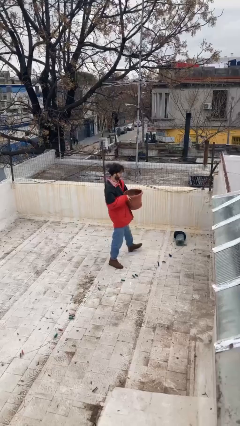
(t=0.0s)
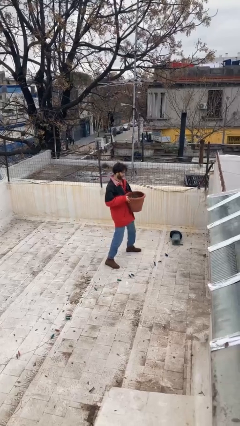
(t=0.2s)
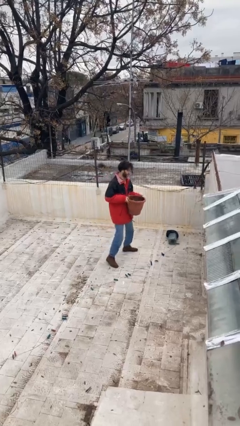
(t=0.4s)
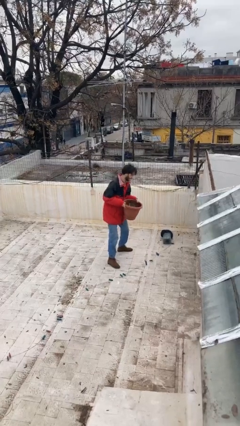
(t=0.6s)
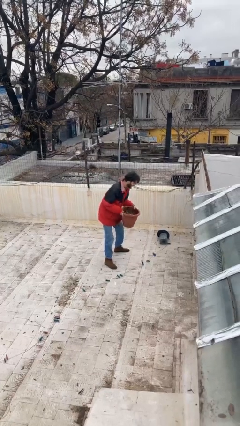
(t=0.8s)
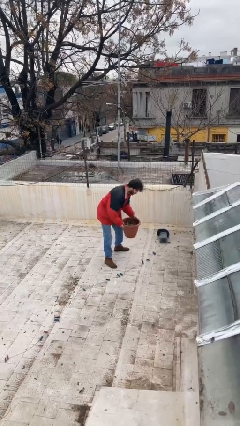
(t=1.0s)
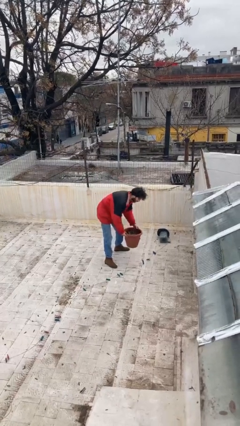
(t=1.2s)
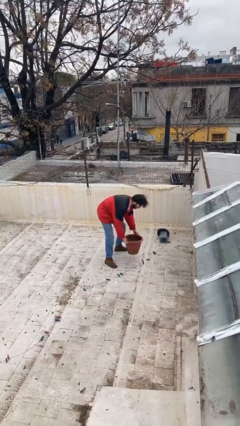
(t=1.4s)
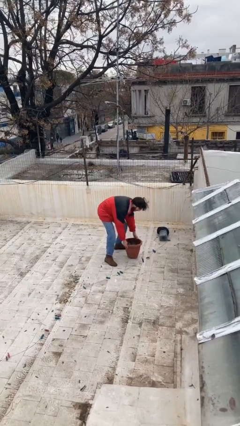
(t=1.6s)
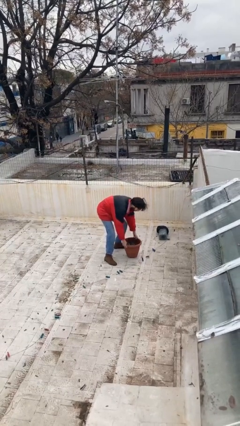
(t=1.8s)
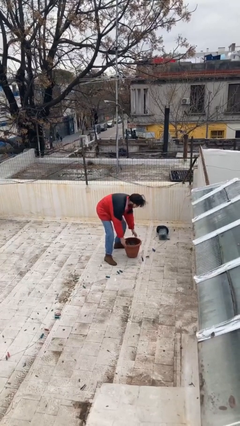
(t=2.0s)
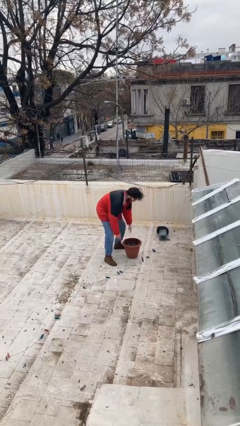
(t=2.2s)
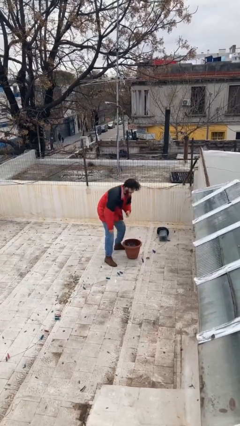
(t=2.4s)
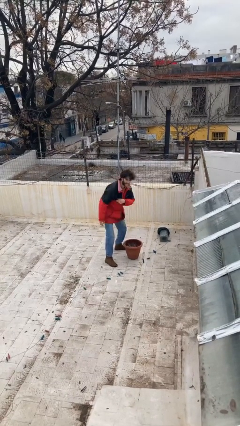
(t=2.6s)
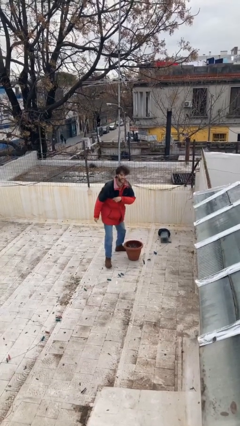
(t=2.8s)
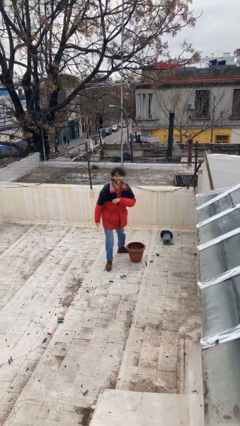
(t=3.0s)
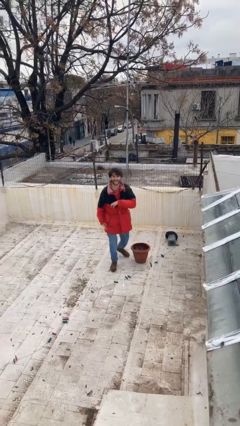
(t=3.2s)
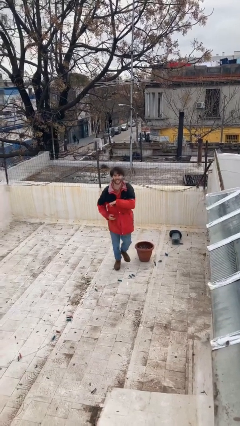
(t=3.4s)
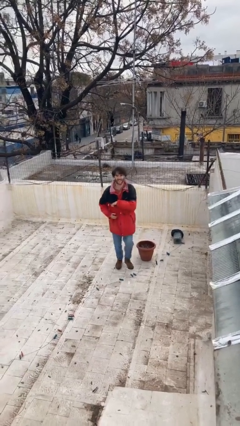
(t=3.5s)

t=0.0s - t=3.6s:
person puts down object on floor

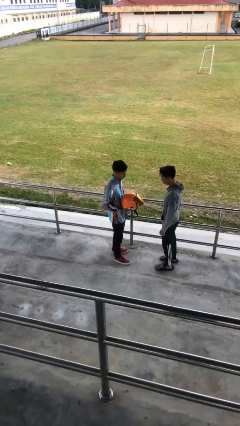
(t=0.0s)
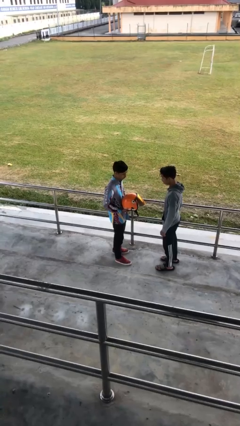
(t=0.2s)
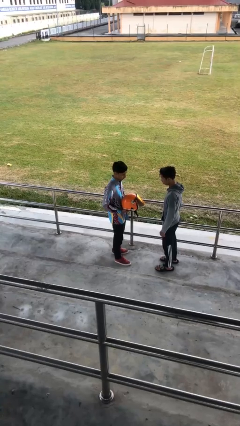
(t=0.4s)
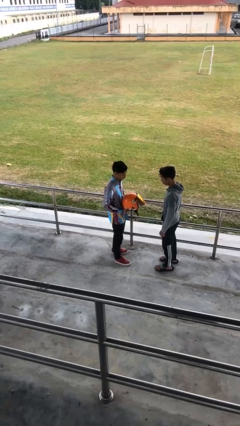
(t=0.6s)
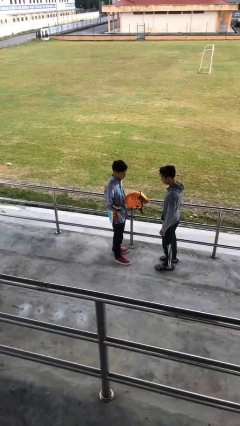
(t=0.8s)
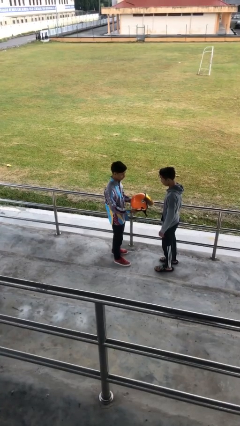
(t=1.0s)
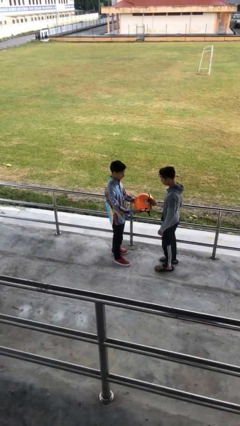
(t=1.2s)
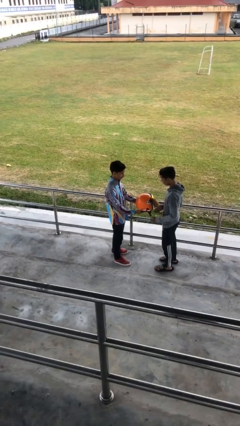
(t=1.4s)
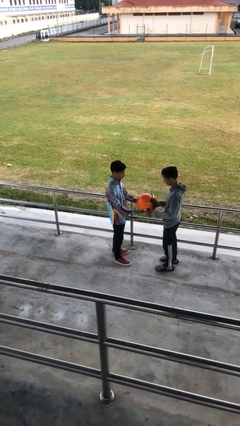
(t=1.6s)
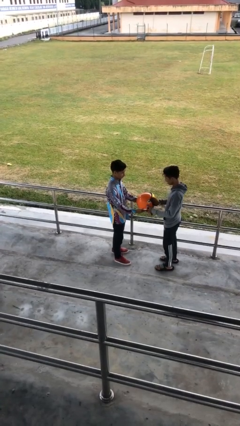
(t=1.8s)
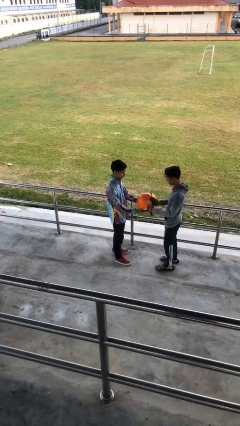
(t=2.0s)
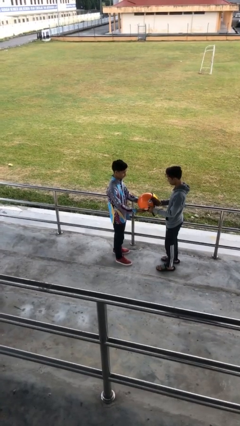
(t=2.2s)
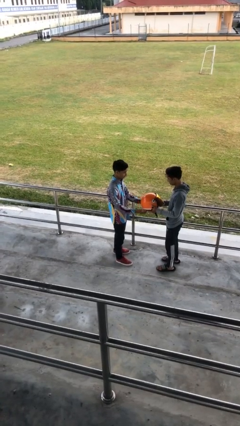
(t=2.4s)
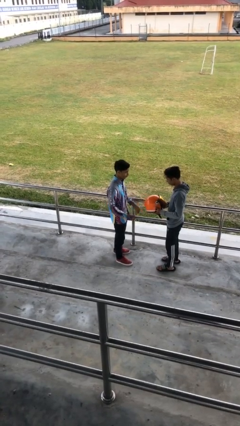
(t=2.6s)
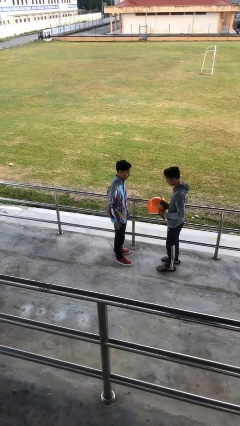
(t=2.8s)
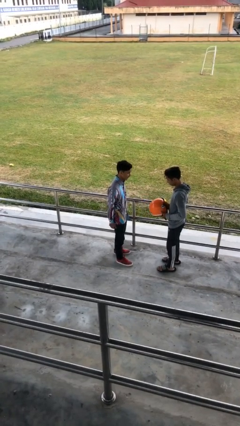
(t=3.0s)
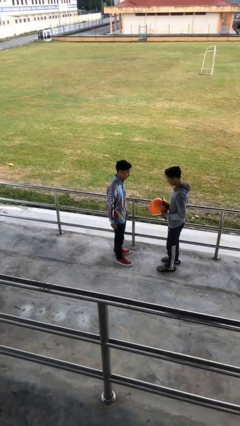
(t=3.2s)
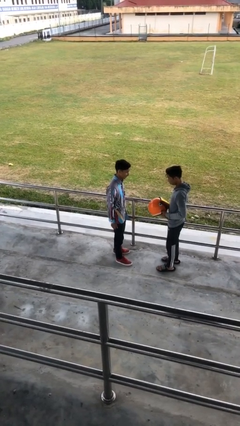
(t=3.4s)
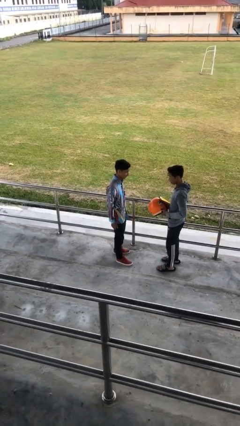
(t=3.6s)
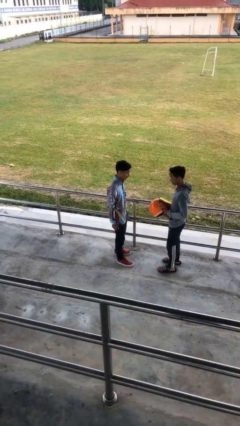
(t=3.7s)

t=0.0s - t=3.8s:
person transfers object to person

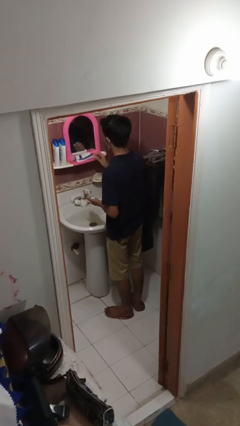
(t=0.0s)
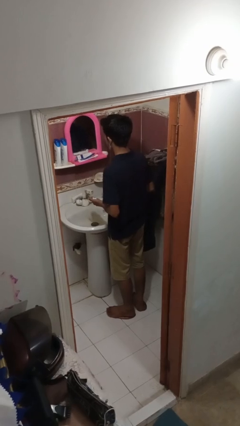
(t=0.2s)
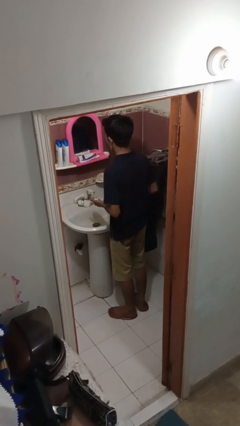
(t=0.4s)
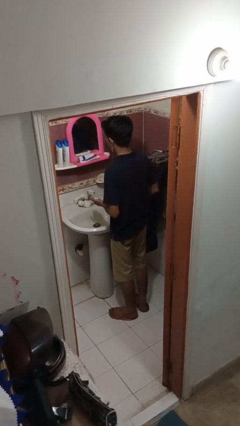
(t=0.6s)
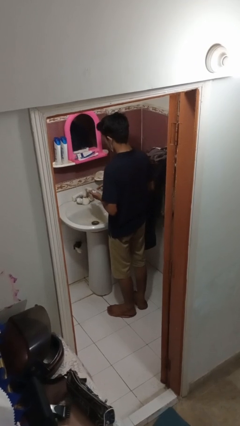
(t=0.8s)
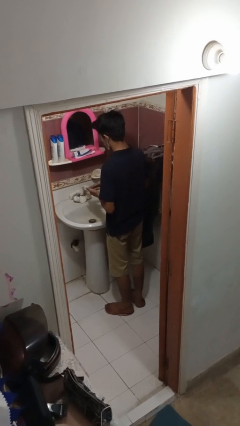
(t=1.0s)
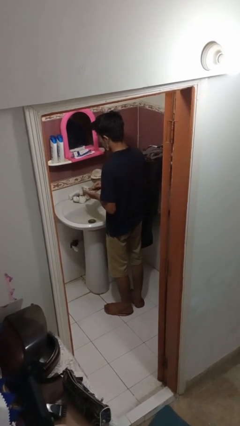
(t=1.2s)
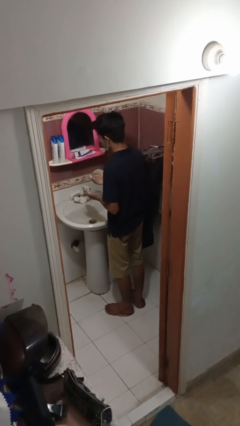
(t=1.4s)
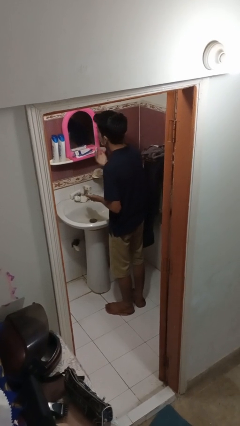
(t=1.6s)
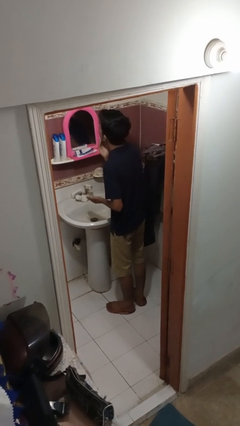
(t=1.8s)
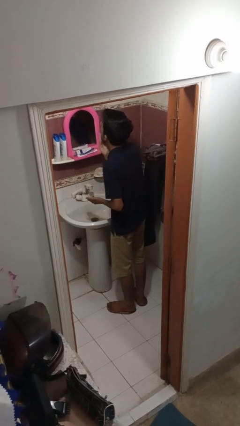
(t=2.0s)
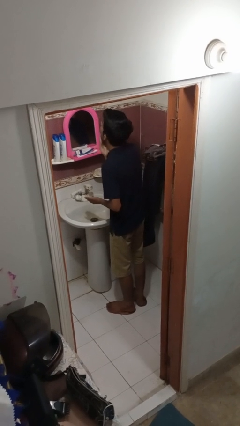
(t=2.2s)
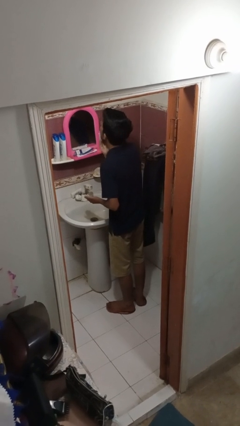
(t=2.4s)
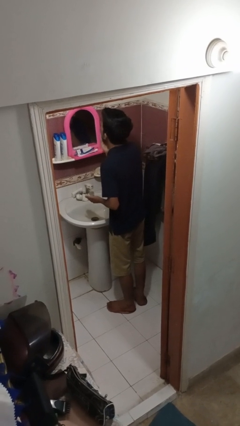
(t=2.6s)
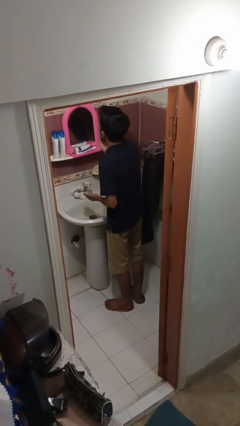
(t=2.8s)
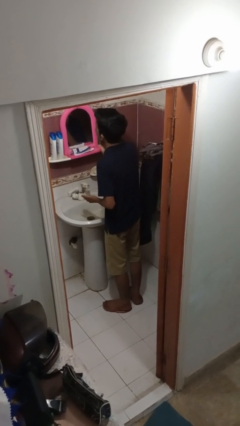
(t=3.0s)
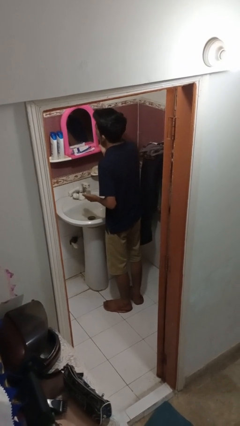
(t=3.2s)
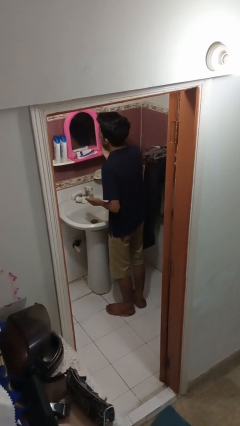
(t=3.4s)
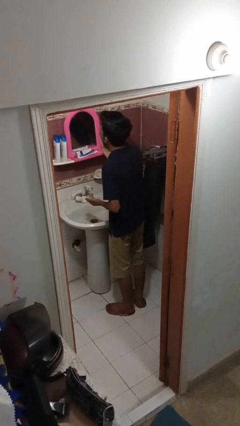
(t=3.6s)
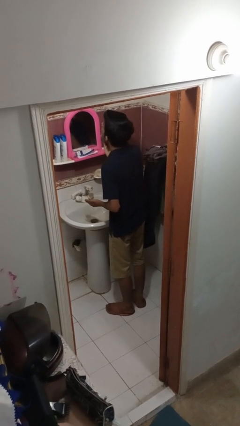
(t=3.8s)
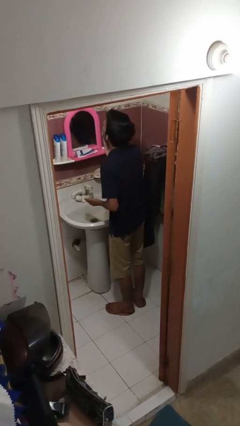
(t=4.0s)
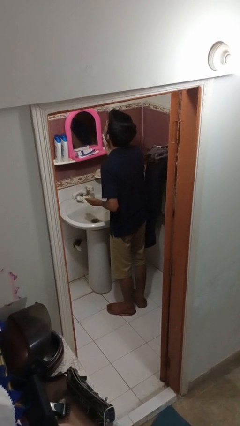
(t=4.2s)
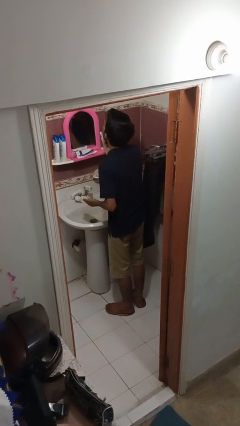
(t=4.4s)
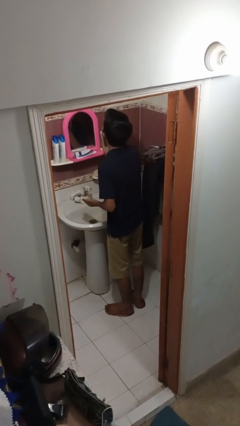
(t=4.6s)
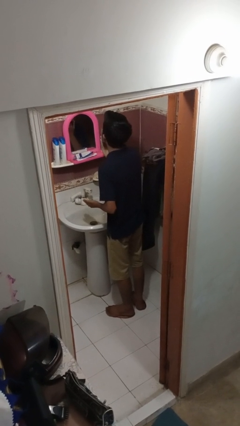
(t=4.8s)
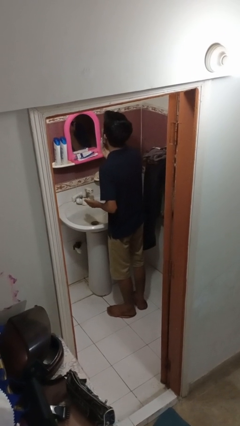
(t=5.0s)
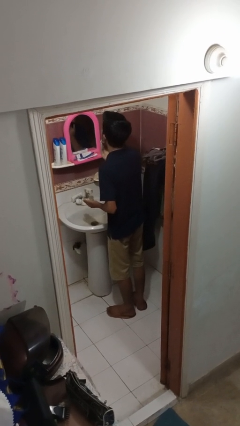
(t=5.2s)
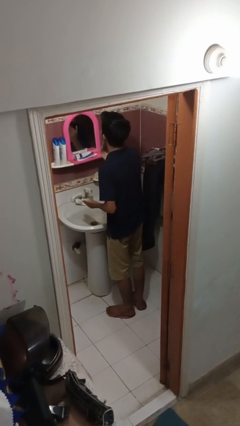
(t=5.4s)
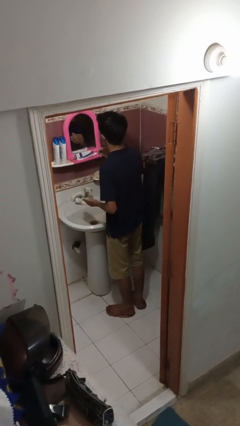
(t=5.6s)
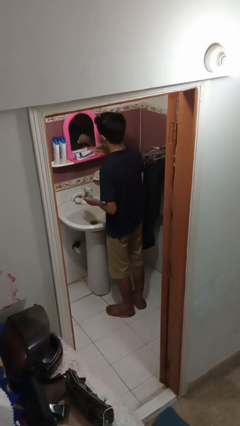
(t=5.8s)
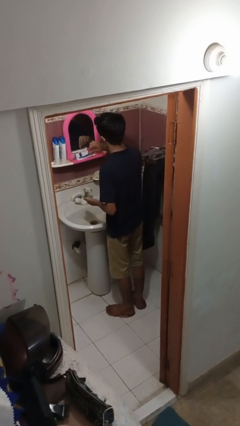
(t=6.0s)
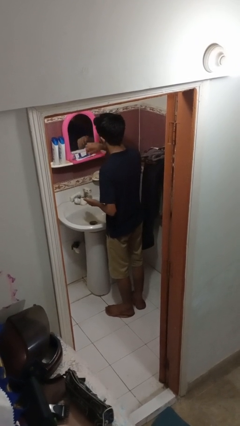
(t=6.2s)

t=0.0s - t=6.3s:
person applies shaving cream

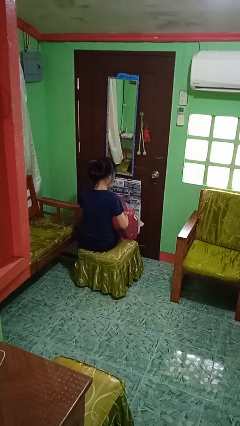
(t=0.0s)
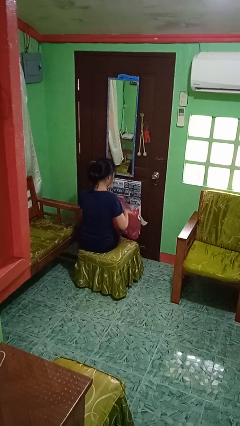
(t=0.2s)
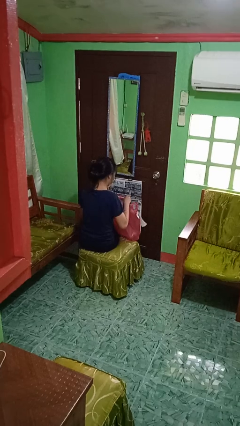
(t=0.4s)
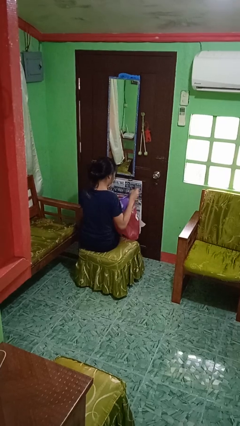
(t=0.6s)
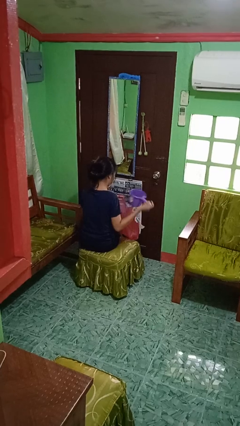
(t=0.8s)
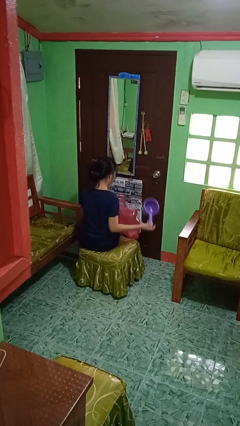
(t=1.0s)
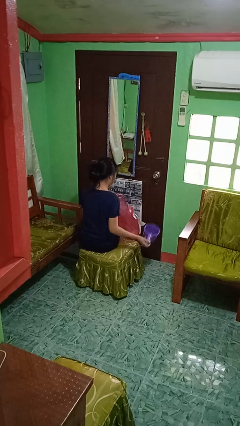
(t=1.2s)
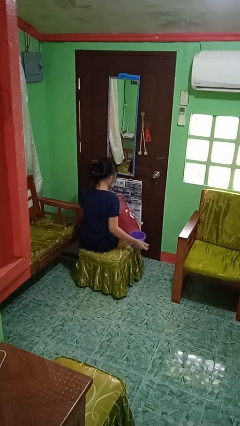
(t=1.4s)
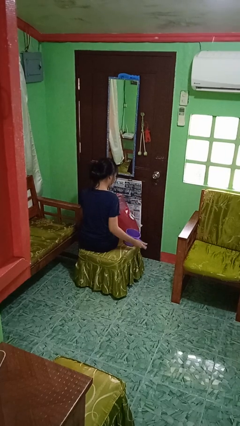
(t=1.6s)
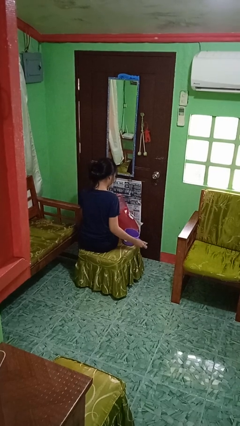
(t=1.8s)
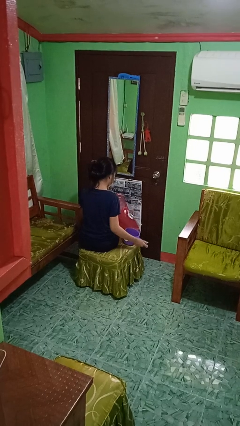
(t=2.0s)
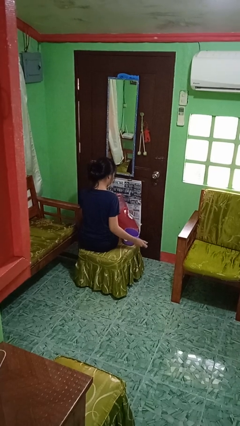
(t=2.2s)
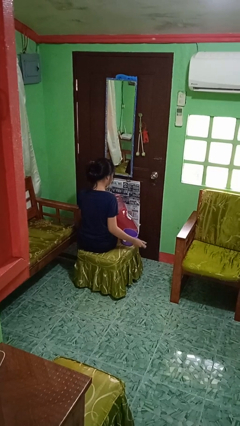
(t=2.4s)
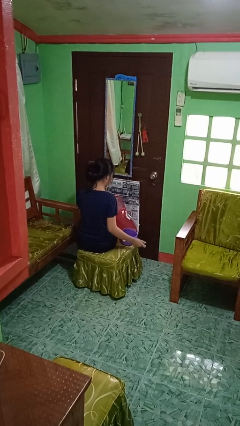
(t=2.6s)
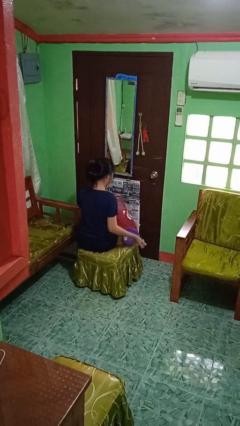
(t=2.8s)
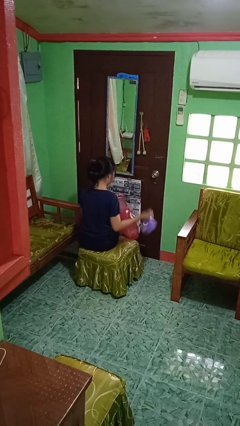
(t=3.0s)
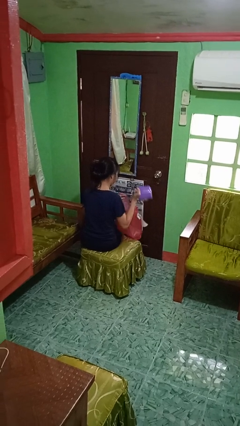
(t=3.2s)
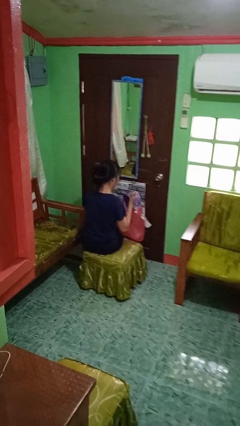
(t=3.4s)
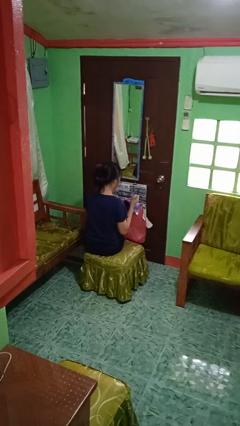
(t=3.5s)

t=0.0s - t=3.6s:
person takes object from bag

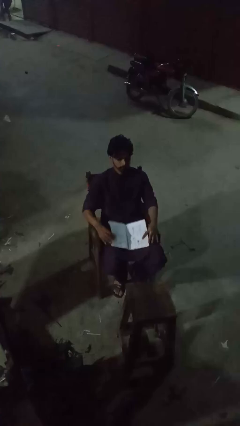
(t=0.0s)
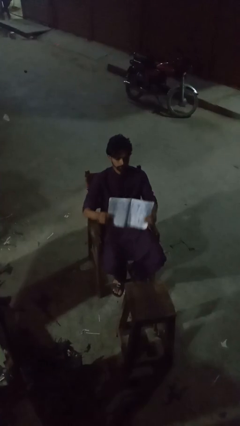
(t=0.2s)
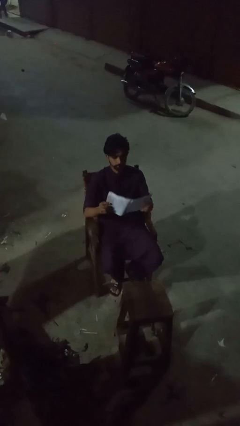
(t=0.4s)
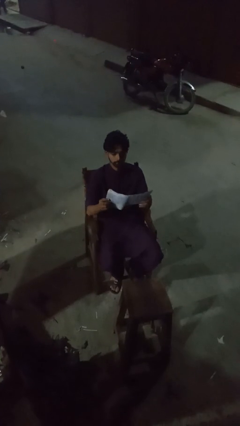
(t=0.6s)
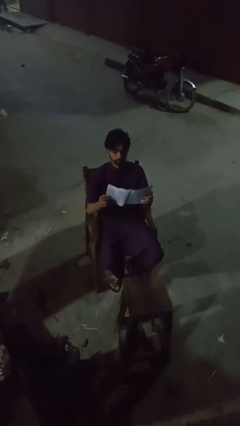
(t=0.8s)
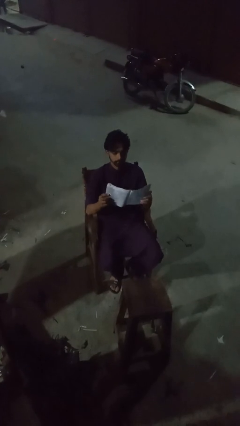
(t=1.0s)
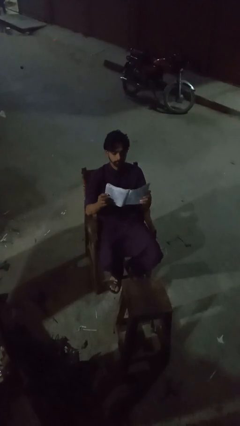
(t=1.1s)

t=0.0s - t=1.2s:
person reads magazine
